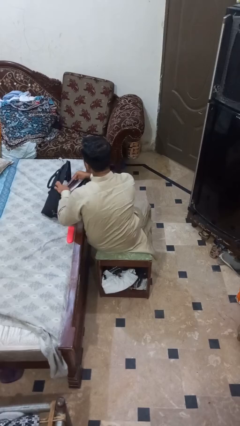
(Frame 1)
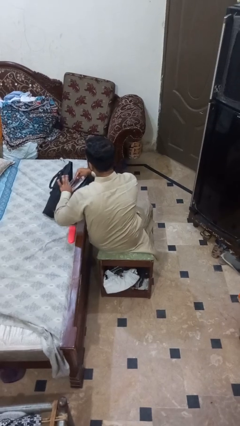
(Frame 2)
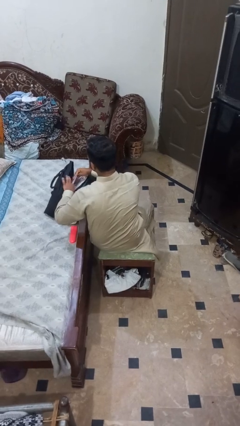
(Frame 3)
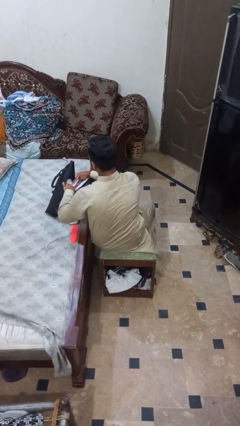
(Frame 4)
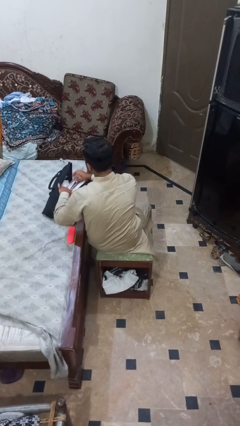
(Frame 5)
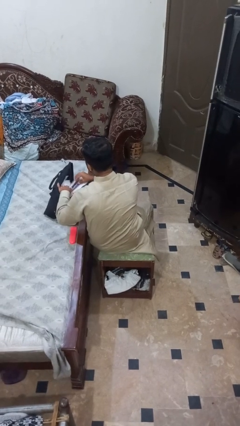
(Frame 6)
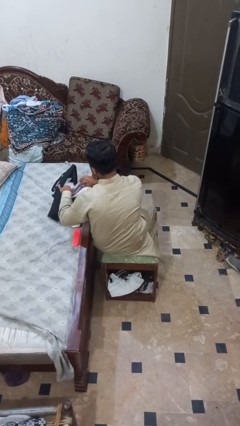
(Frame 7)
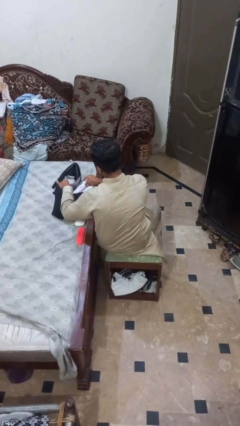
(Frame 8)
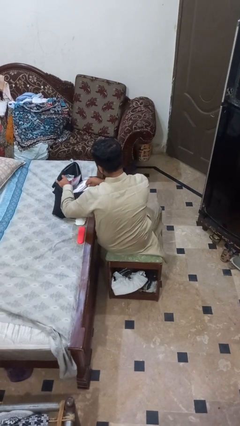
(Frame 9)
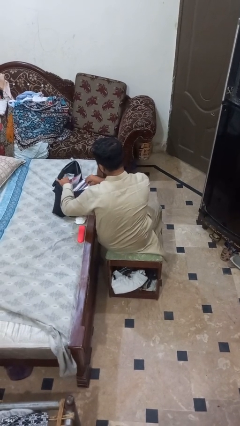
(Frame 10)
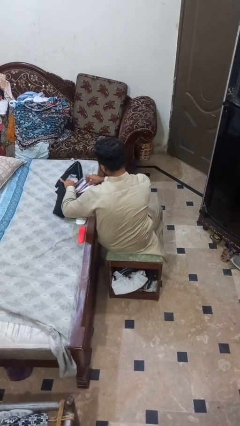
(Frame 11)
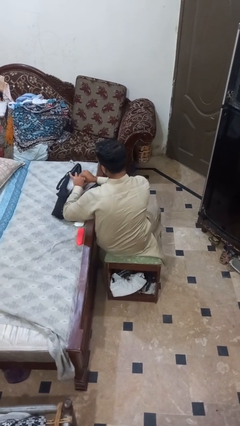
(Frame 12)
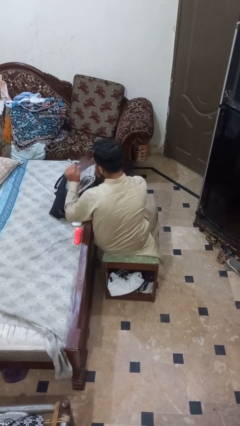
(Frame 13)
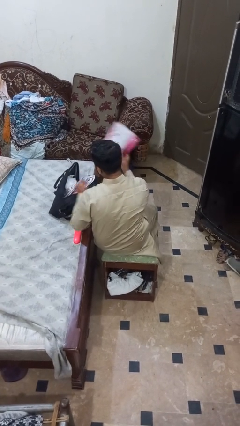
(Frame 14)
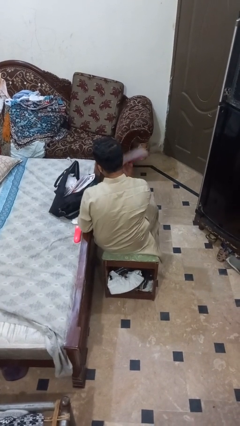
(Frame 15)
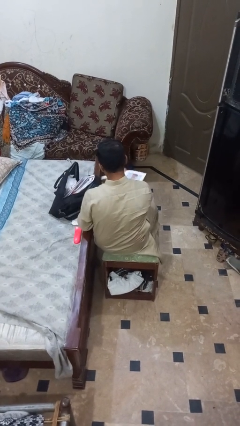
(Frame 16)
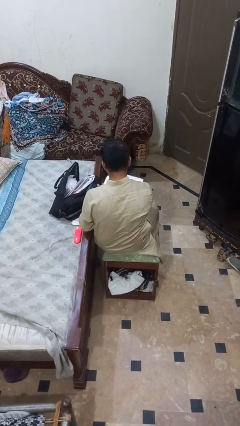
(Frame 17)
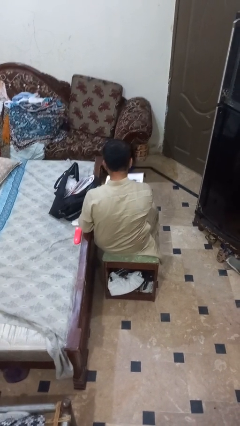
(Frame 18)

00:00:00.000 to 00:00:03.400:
person searches in bag

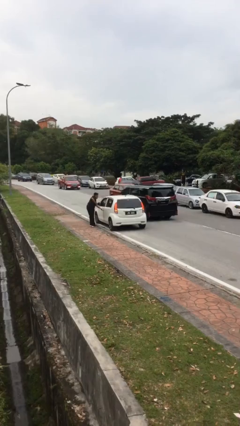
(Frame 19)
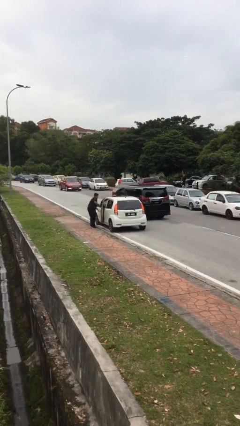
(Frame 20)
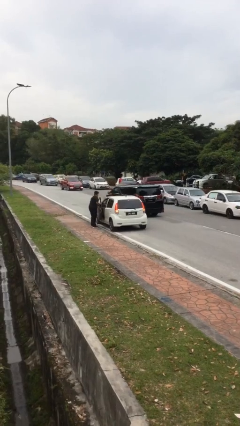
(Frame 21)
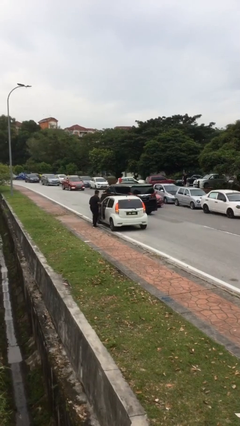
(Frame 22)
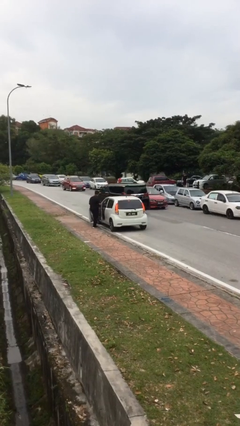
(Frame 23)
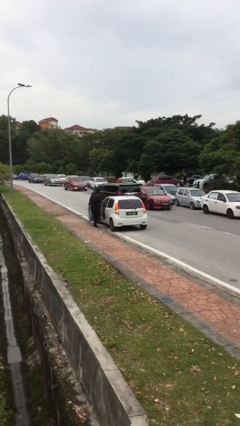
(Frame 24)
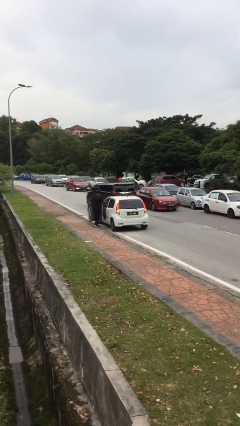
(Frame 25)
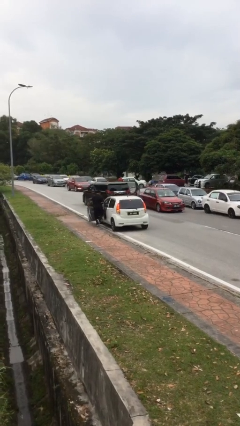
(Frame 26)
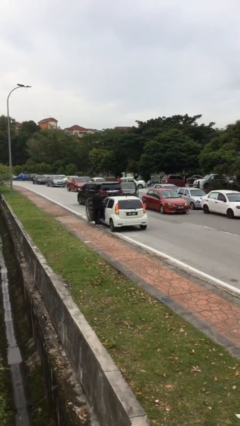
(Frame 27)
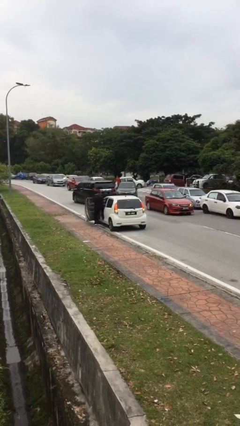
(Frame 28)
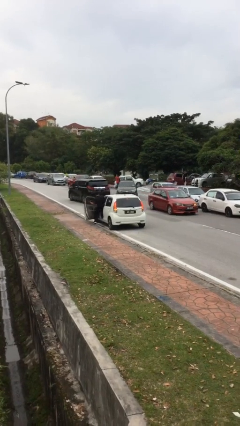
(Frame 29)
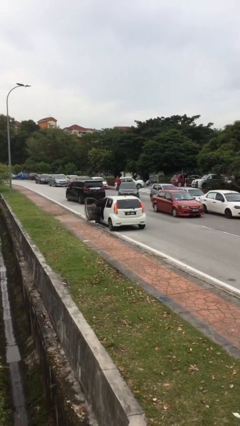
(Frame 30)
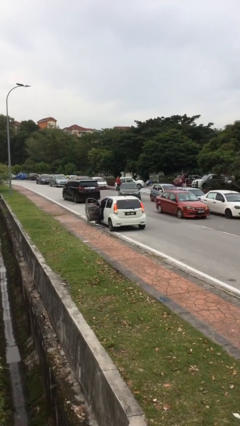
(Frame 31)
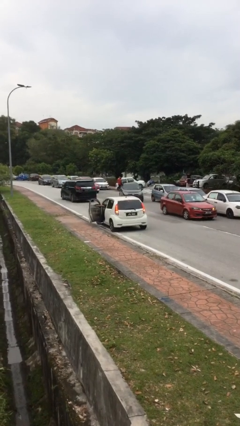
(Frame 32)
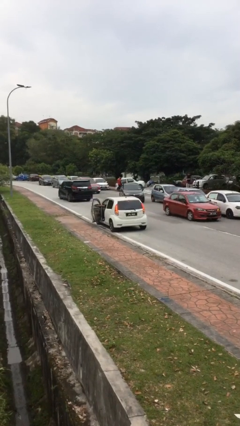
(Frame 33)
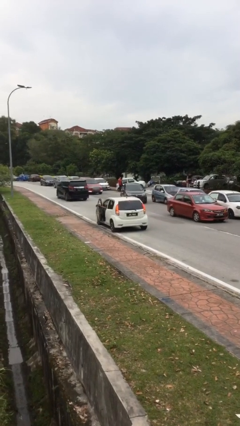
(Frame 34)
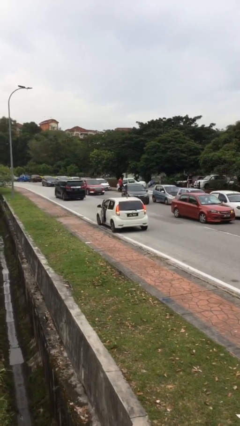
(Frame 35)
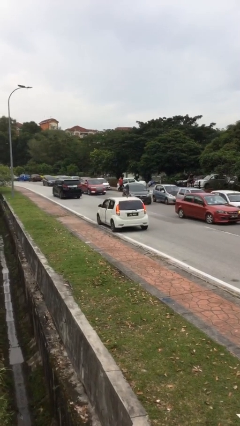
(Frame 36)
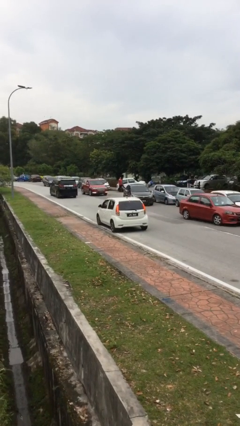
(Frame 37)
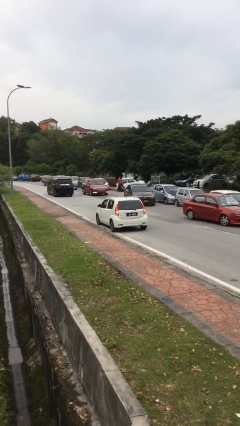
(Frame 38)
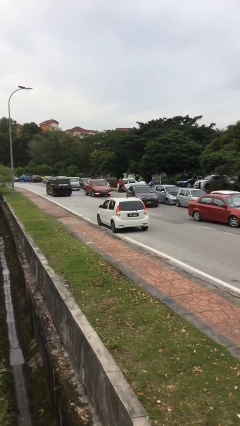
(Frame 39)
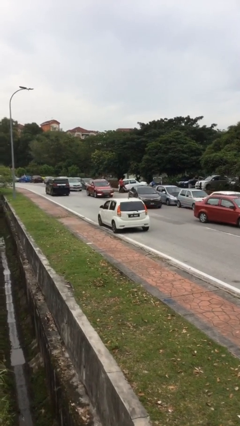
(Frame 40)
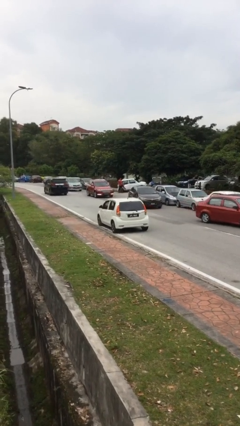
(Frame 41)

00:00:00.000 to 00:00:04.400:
car picks up person

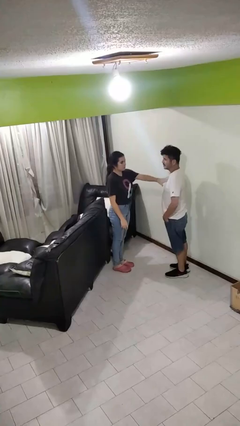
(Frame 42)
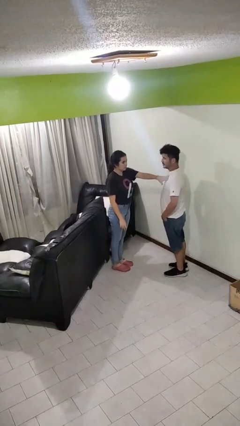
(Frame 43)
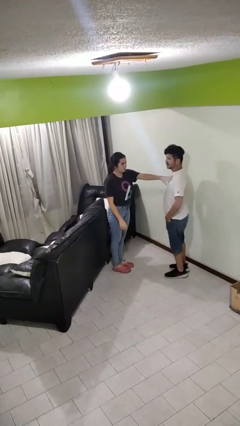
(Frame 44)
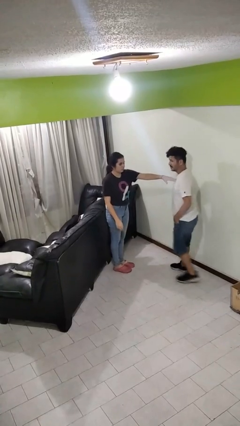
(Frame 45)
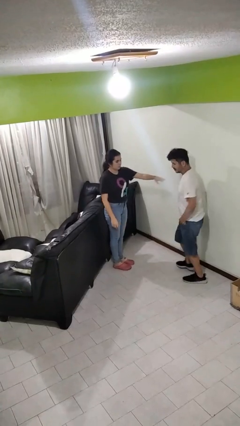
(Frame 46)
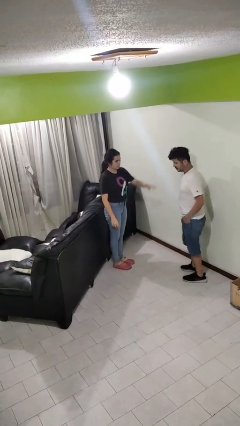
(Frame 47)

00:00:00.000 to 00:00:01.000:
person shoves person

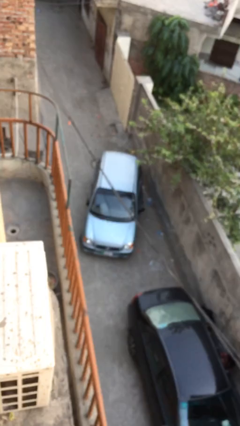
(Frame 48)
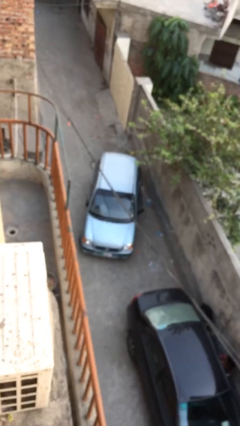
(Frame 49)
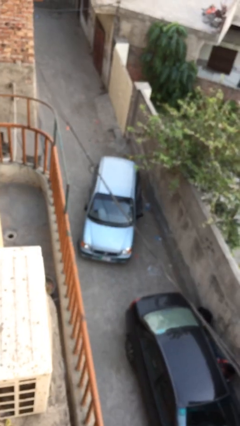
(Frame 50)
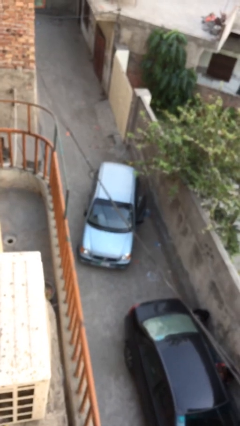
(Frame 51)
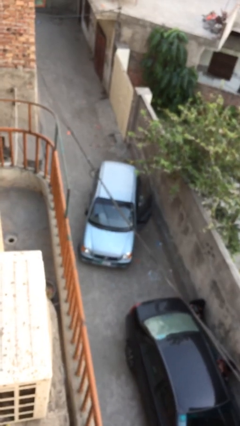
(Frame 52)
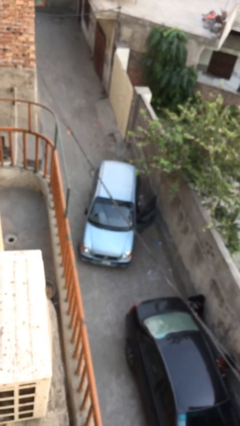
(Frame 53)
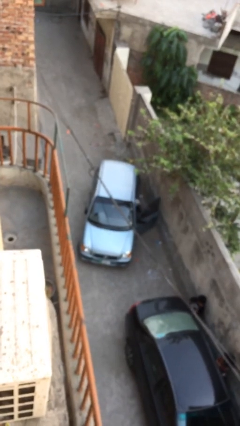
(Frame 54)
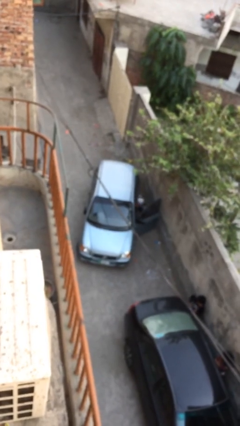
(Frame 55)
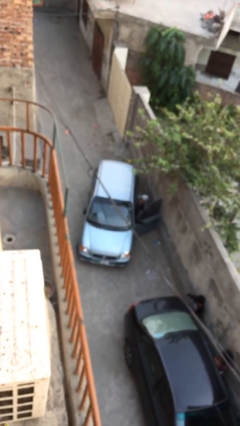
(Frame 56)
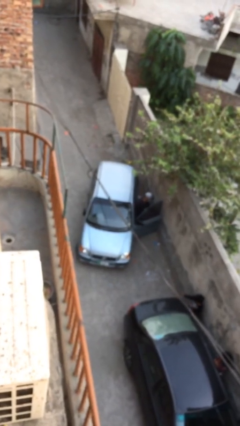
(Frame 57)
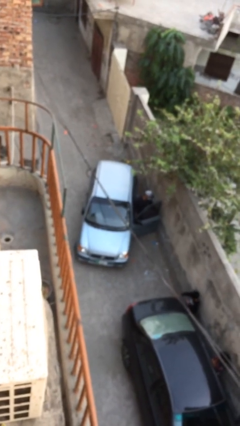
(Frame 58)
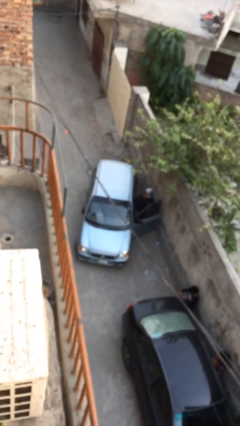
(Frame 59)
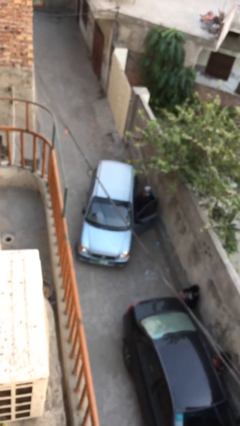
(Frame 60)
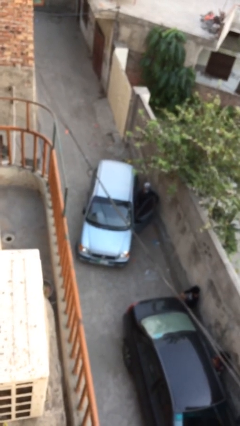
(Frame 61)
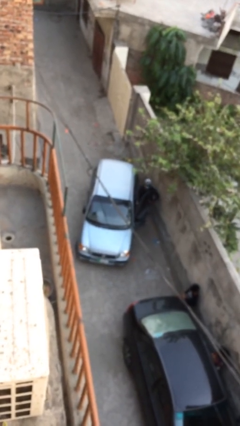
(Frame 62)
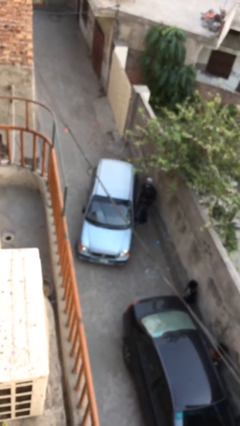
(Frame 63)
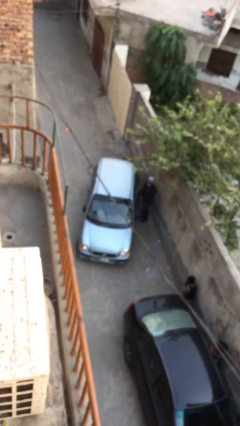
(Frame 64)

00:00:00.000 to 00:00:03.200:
car drops off person

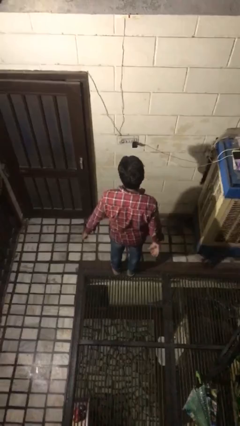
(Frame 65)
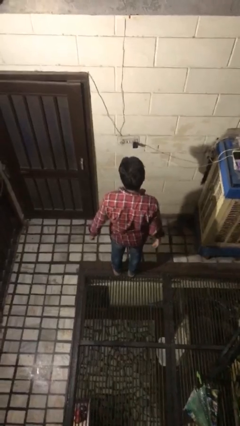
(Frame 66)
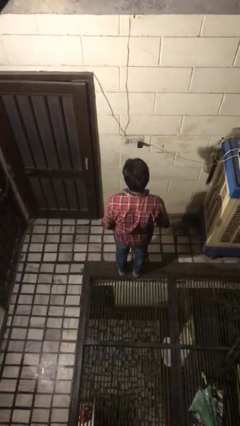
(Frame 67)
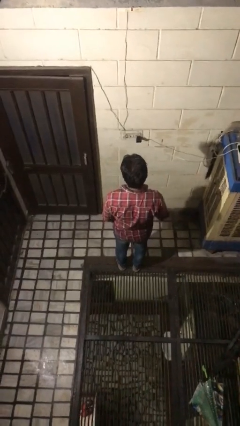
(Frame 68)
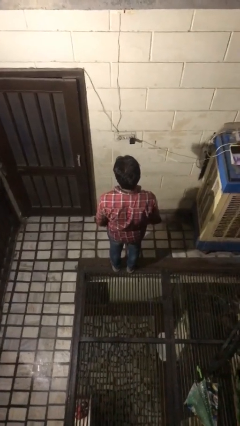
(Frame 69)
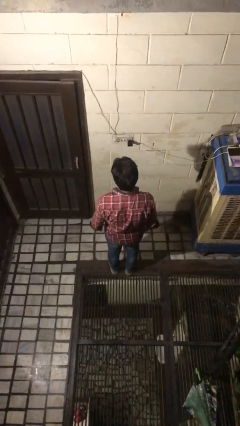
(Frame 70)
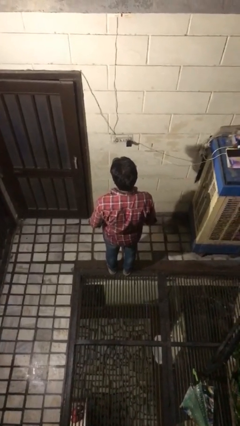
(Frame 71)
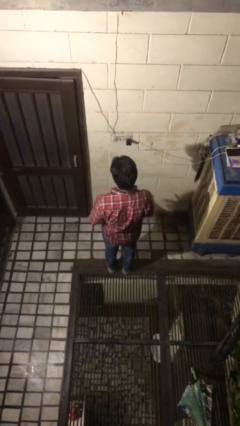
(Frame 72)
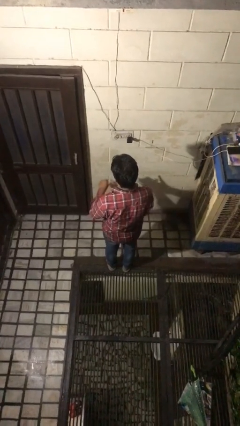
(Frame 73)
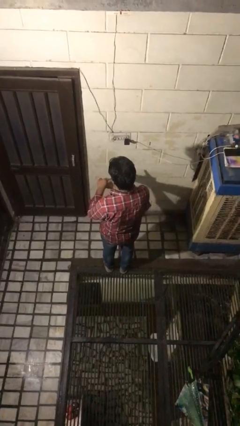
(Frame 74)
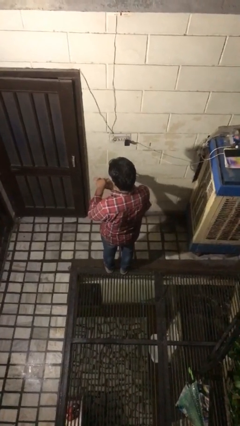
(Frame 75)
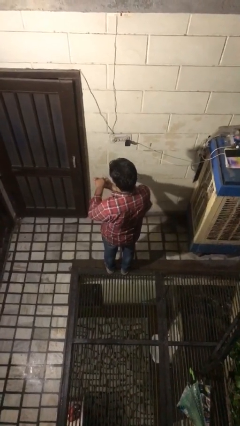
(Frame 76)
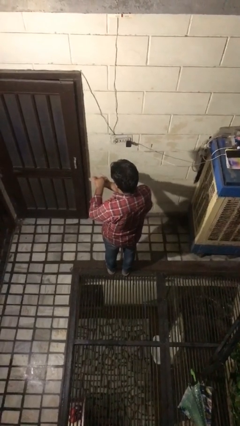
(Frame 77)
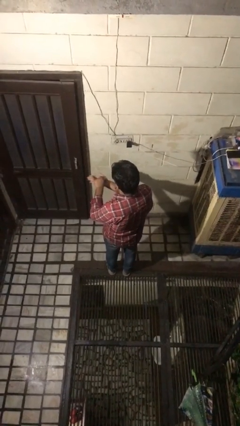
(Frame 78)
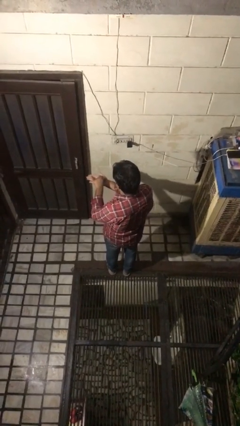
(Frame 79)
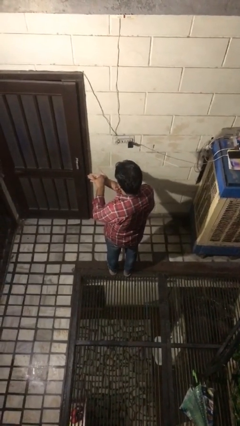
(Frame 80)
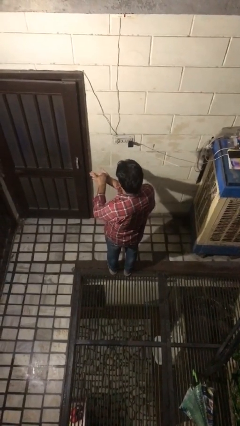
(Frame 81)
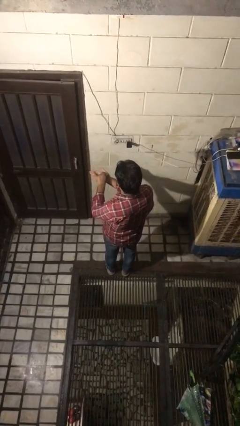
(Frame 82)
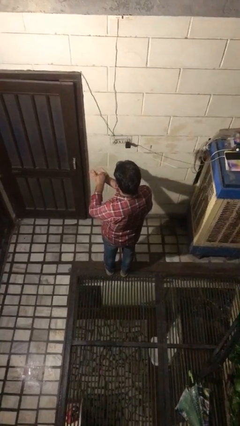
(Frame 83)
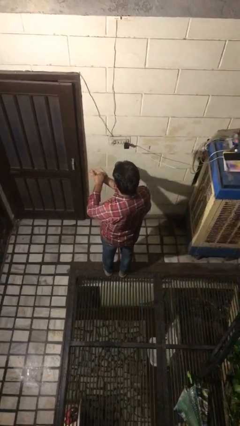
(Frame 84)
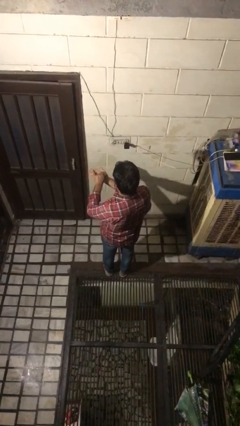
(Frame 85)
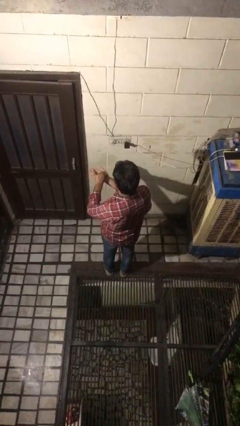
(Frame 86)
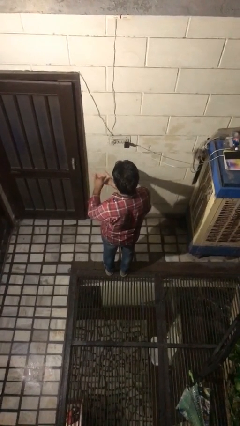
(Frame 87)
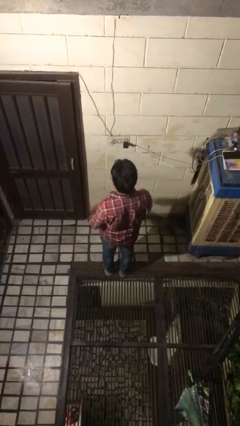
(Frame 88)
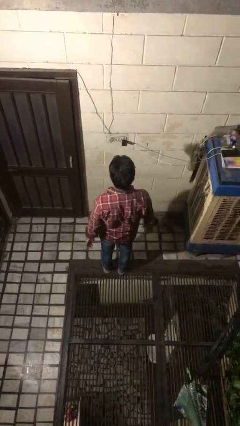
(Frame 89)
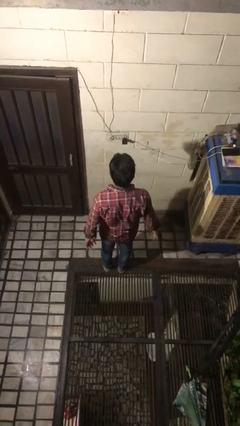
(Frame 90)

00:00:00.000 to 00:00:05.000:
person gestures hang loose

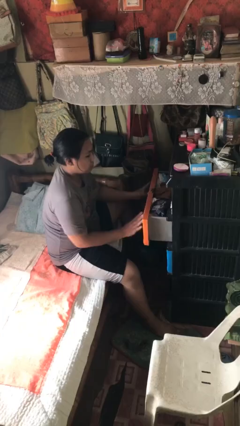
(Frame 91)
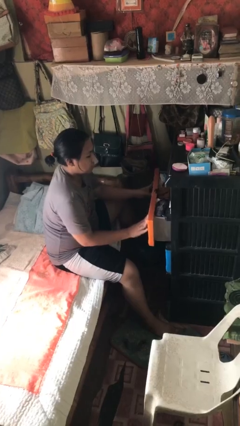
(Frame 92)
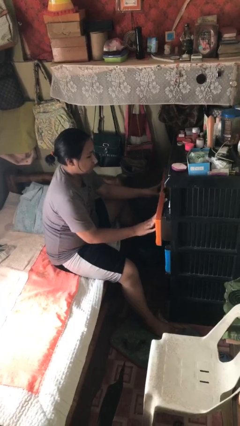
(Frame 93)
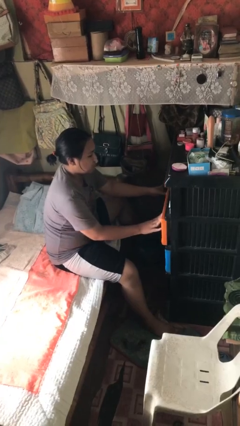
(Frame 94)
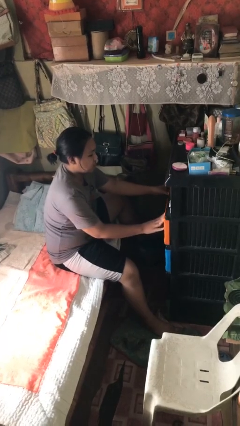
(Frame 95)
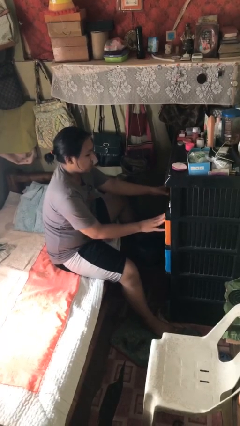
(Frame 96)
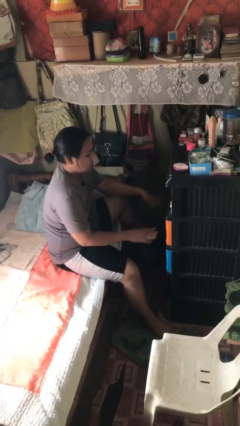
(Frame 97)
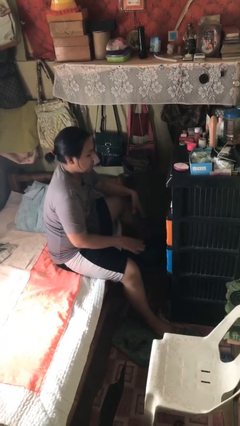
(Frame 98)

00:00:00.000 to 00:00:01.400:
person closes dresser drawer
